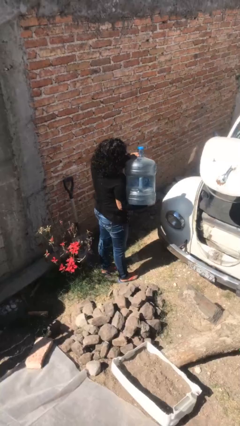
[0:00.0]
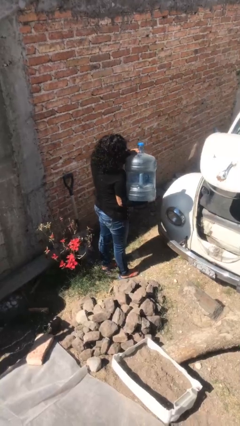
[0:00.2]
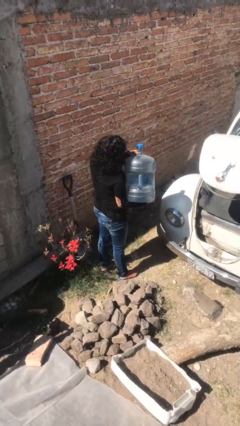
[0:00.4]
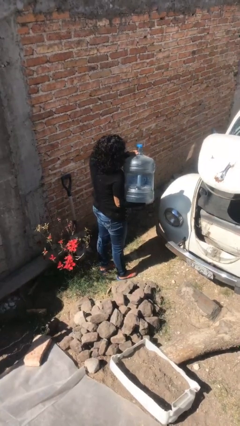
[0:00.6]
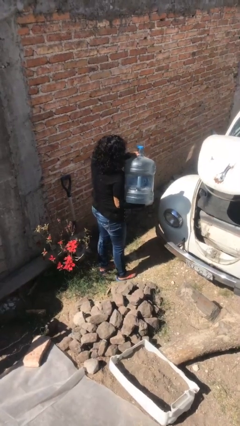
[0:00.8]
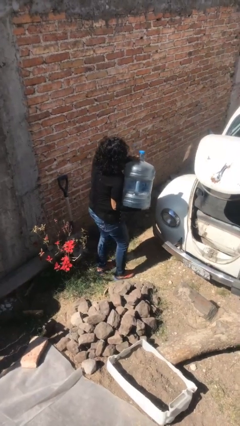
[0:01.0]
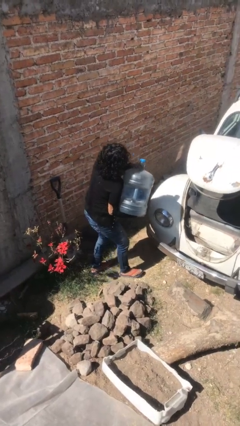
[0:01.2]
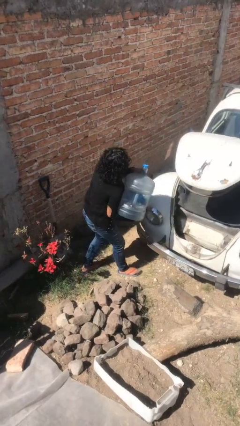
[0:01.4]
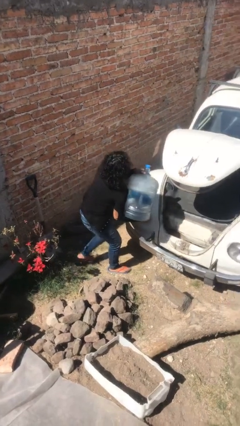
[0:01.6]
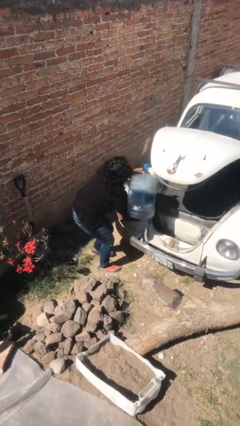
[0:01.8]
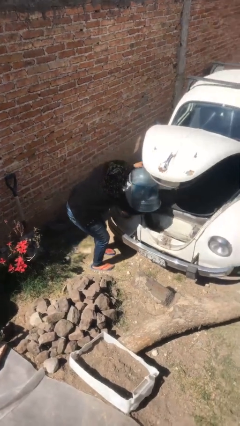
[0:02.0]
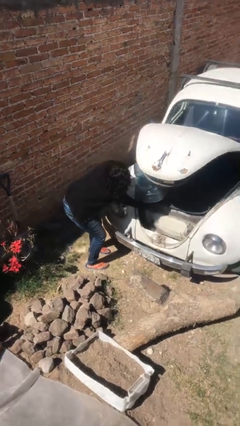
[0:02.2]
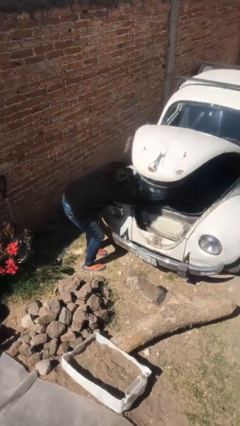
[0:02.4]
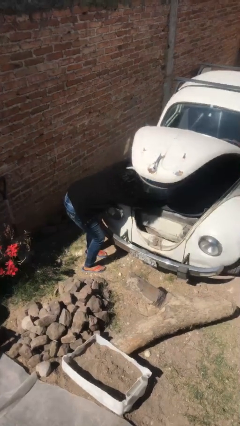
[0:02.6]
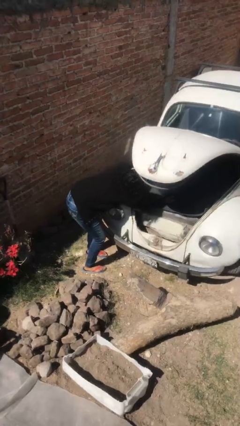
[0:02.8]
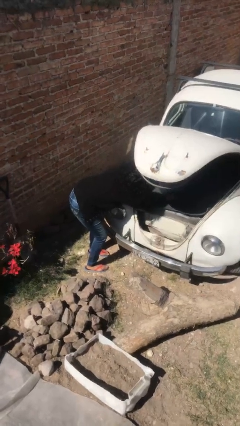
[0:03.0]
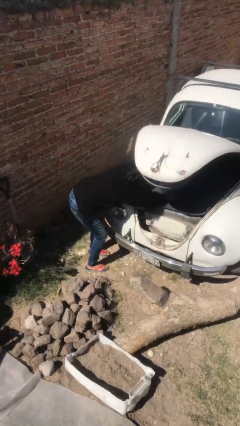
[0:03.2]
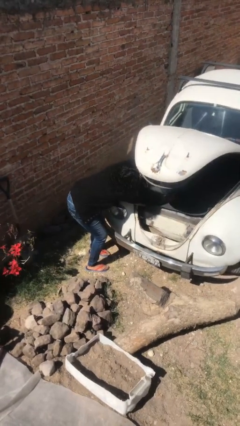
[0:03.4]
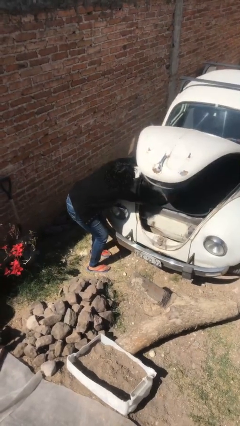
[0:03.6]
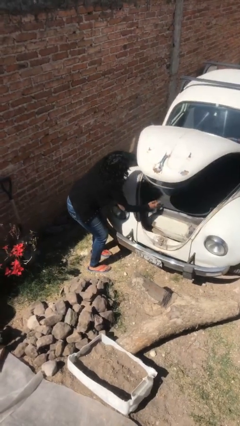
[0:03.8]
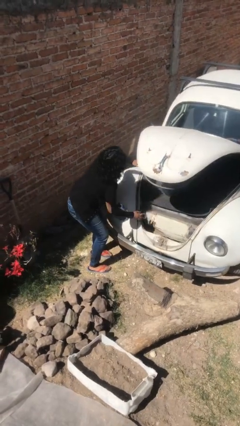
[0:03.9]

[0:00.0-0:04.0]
person loads car

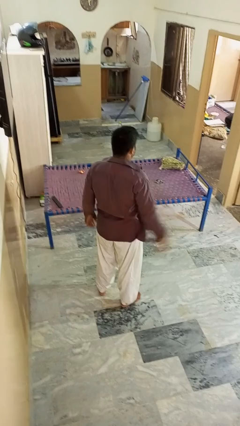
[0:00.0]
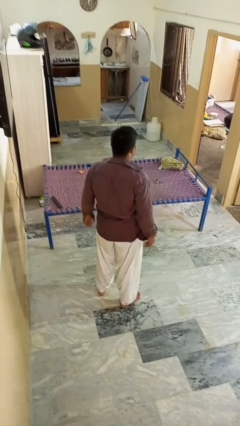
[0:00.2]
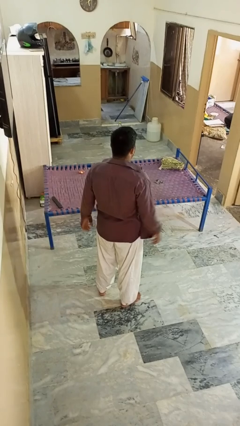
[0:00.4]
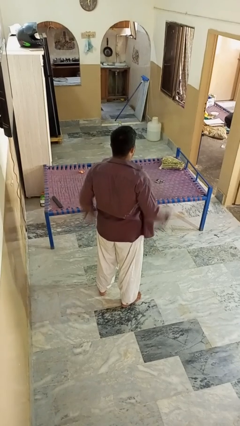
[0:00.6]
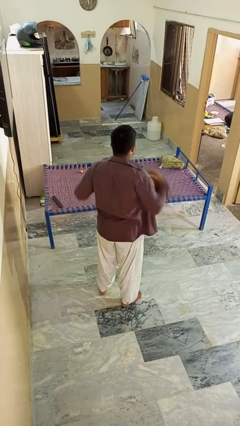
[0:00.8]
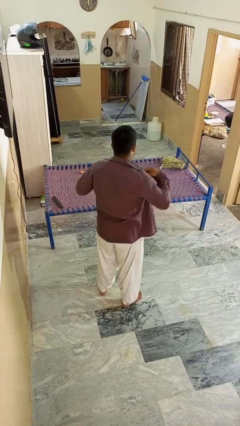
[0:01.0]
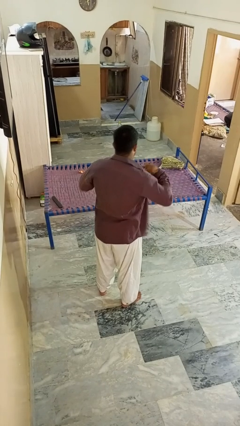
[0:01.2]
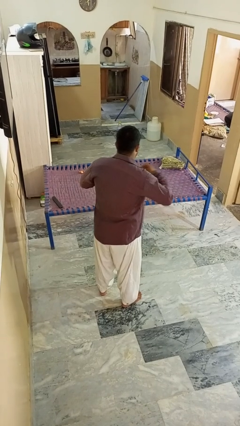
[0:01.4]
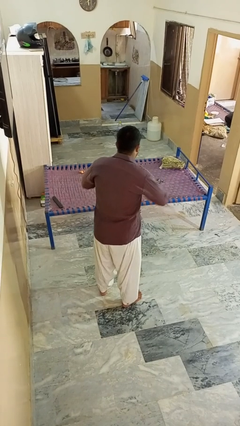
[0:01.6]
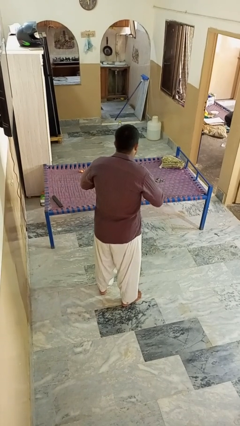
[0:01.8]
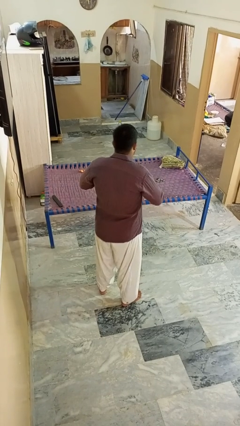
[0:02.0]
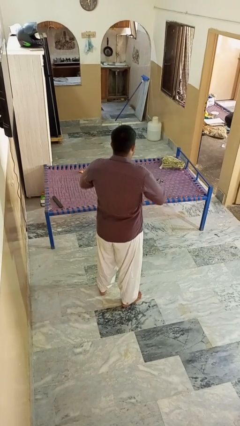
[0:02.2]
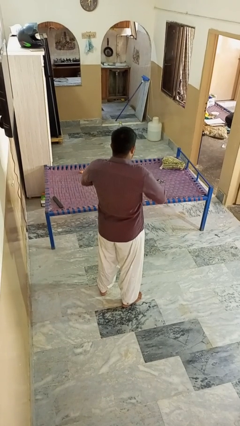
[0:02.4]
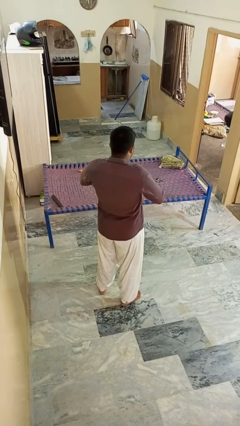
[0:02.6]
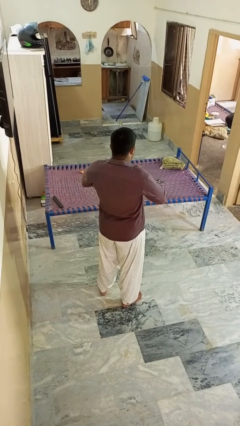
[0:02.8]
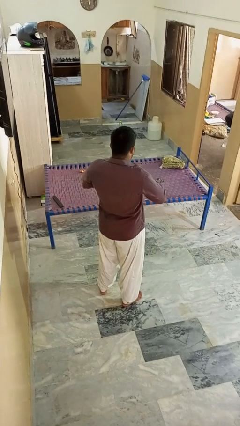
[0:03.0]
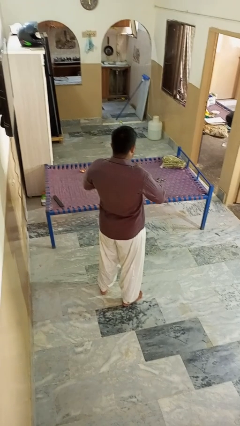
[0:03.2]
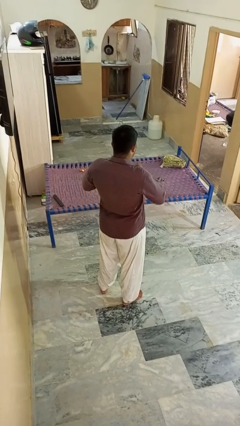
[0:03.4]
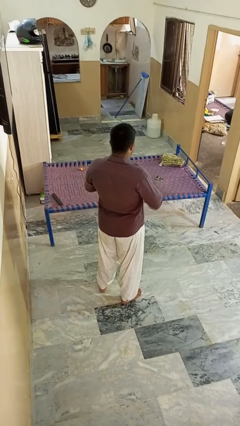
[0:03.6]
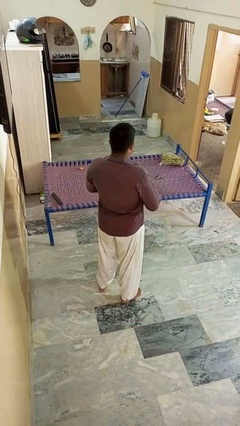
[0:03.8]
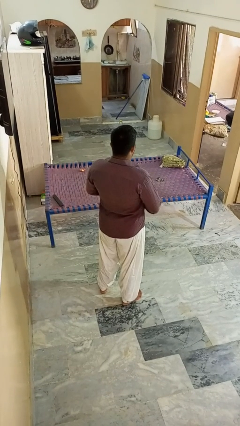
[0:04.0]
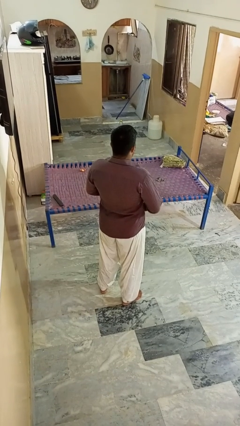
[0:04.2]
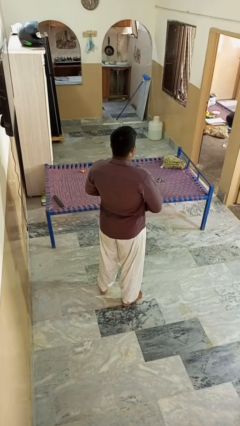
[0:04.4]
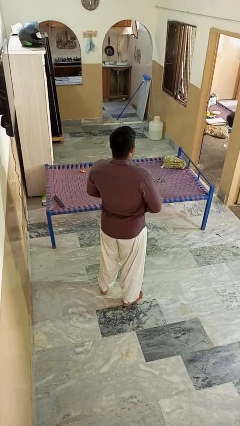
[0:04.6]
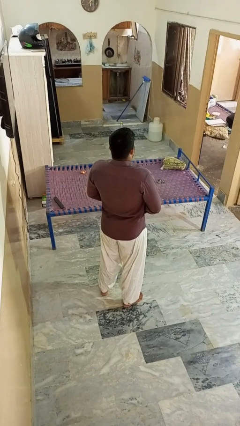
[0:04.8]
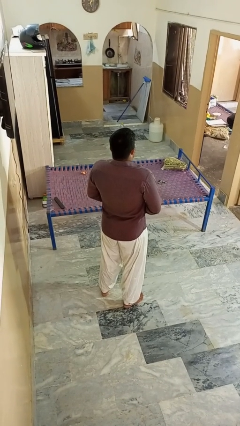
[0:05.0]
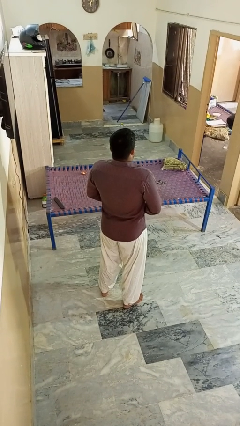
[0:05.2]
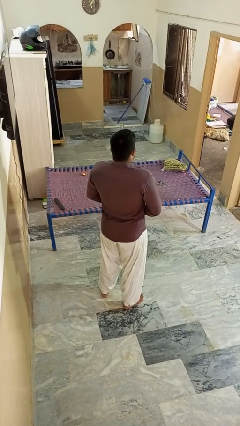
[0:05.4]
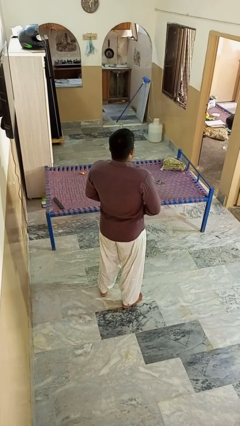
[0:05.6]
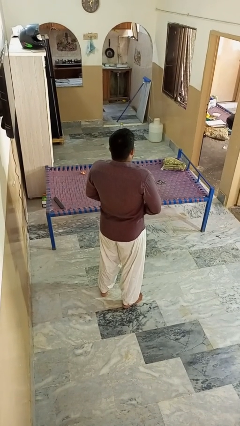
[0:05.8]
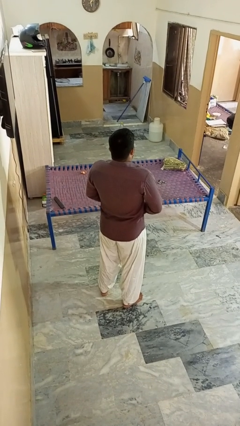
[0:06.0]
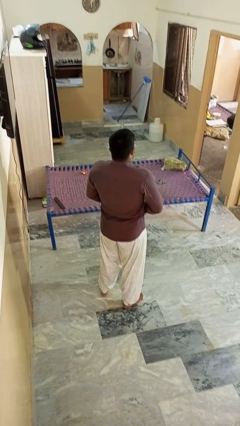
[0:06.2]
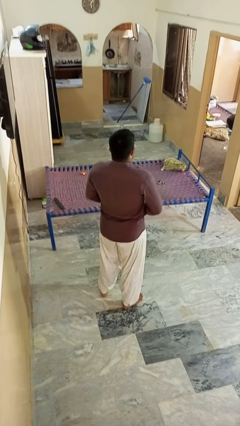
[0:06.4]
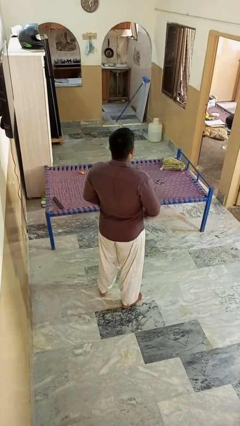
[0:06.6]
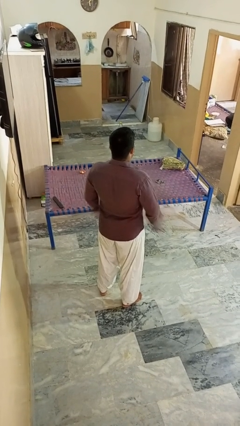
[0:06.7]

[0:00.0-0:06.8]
person buttons shirt

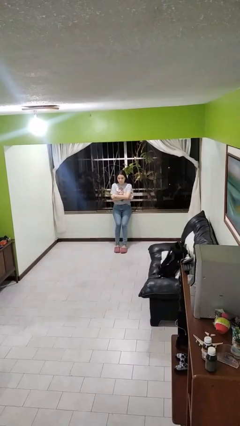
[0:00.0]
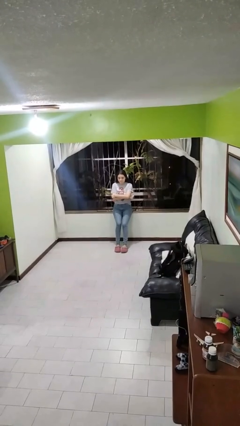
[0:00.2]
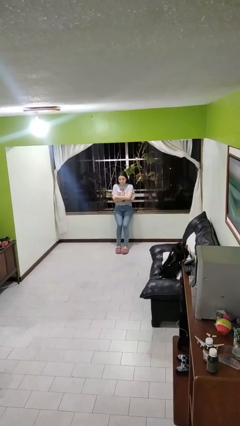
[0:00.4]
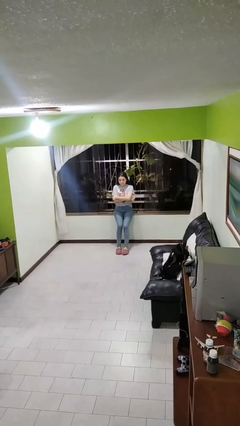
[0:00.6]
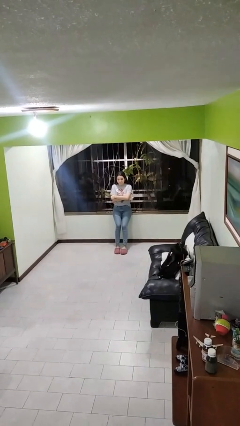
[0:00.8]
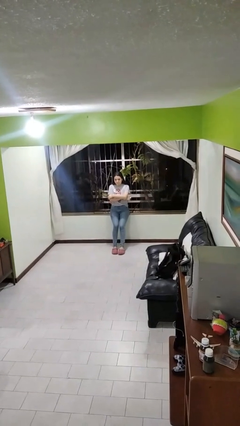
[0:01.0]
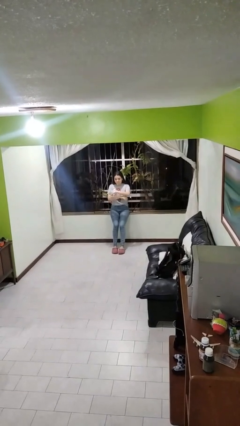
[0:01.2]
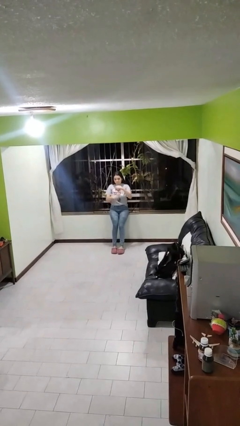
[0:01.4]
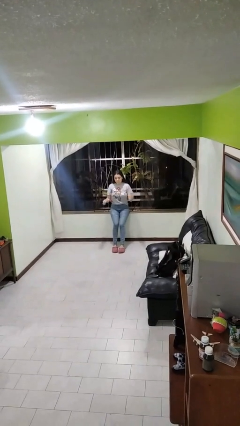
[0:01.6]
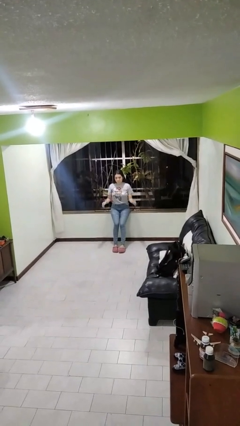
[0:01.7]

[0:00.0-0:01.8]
person crosses arms

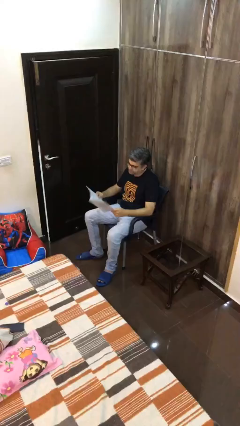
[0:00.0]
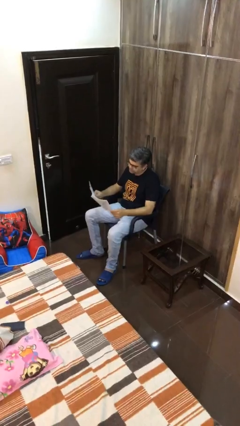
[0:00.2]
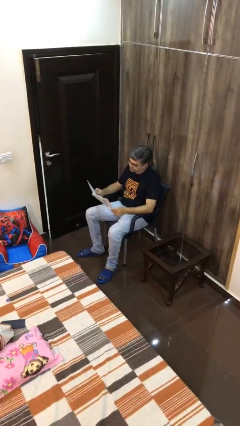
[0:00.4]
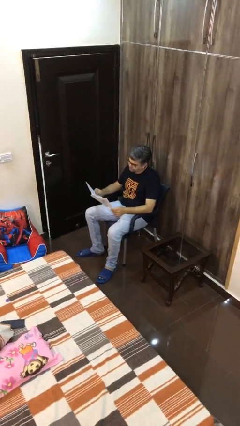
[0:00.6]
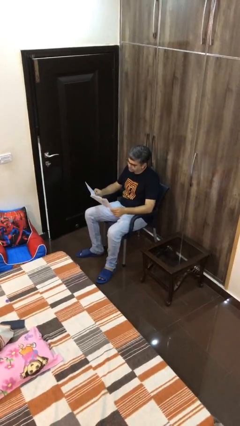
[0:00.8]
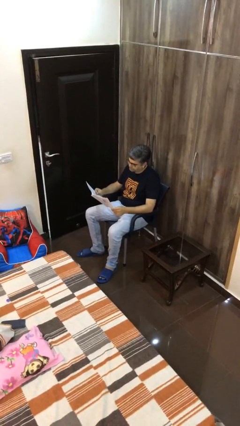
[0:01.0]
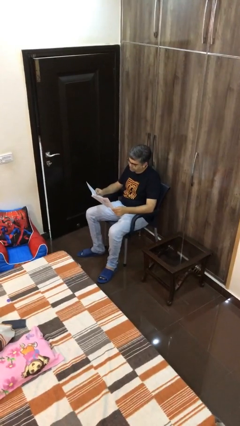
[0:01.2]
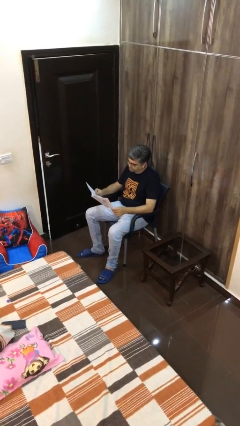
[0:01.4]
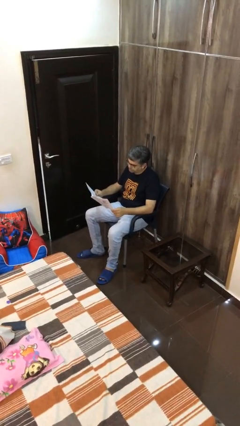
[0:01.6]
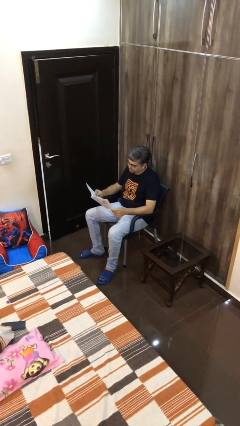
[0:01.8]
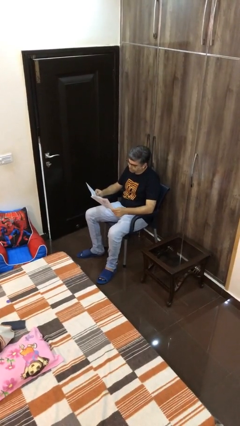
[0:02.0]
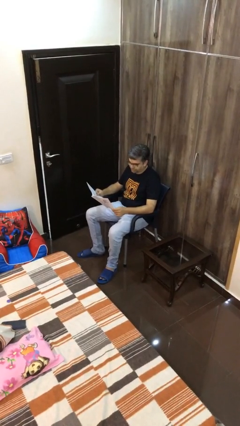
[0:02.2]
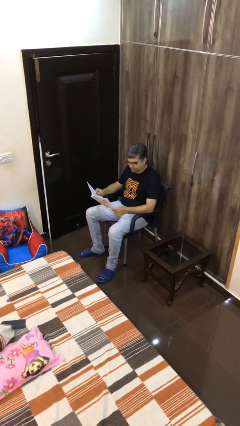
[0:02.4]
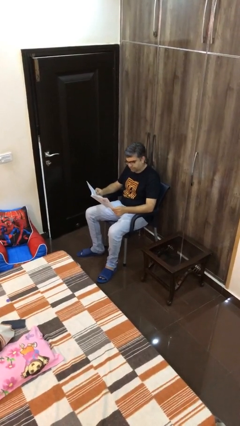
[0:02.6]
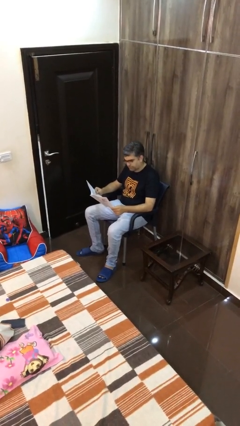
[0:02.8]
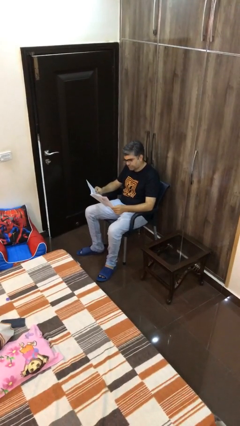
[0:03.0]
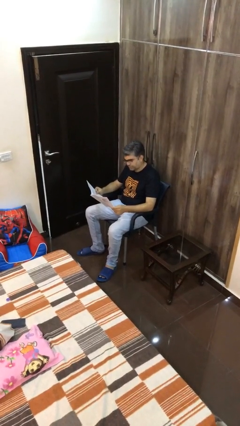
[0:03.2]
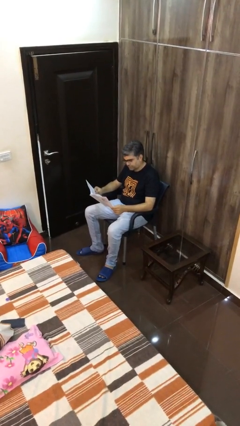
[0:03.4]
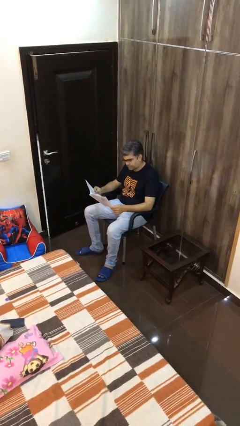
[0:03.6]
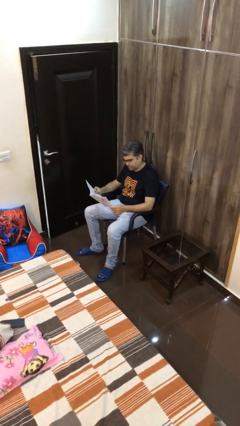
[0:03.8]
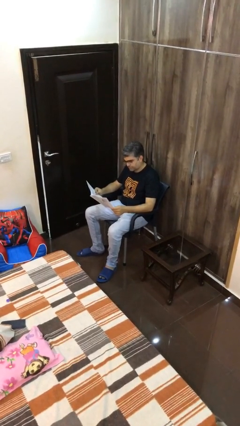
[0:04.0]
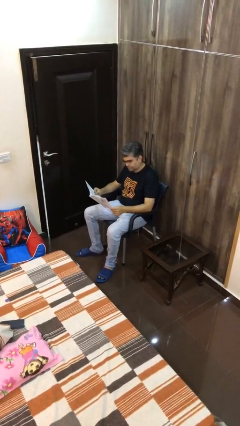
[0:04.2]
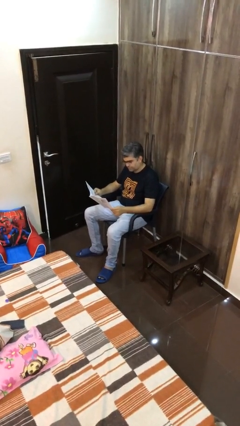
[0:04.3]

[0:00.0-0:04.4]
person reads document

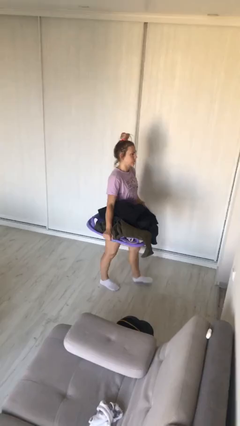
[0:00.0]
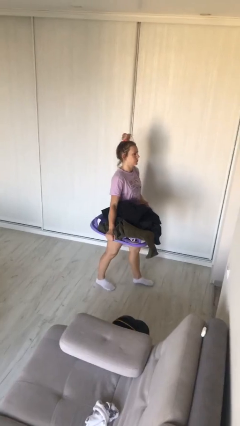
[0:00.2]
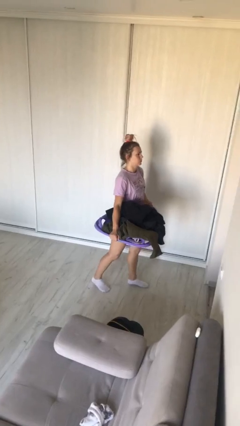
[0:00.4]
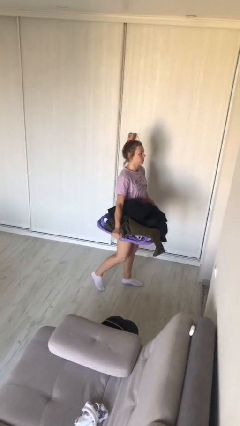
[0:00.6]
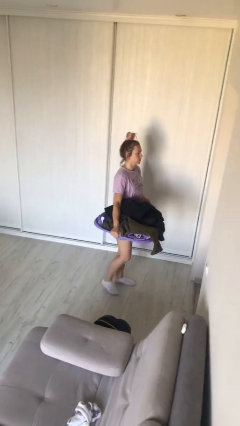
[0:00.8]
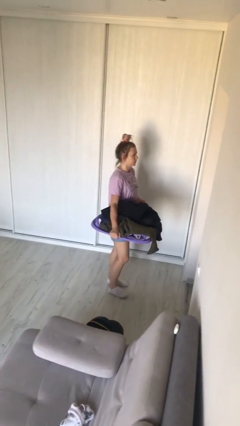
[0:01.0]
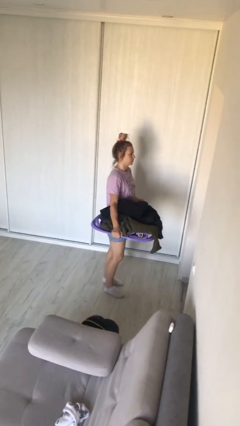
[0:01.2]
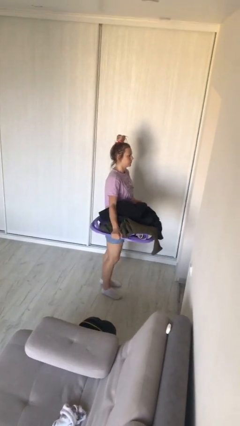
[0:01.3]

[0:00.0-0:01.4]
person carries laundry basket
